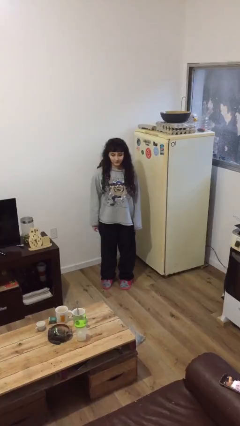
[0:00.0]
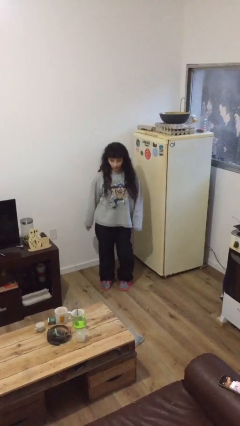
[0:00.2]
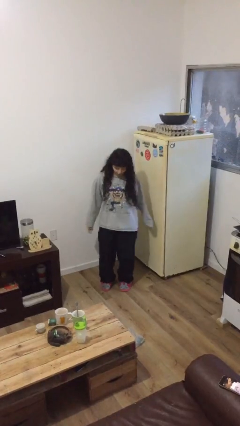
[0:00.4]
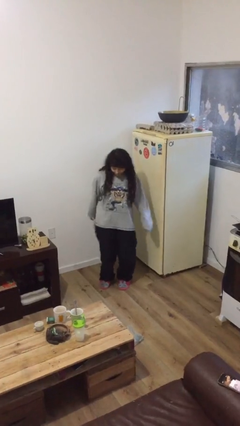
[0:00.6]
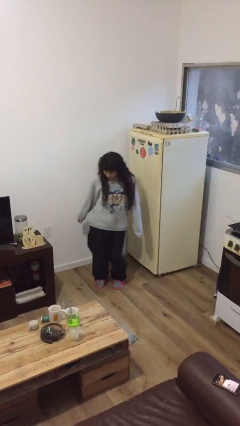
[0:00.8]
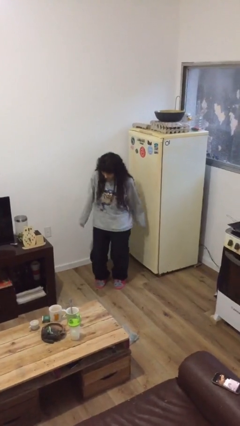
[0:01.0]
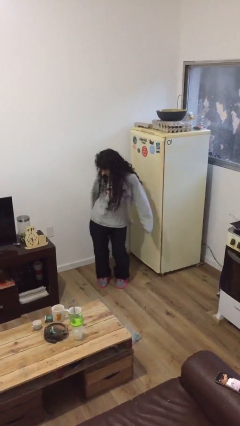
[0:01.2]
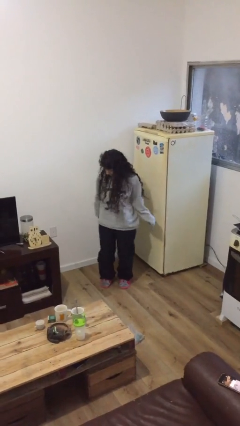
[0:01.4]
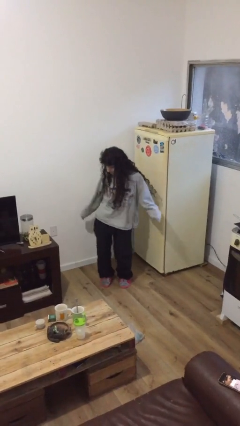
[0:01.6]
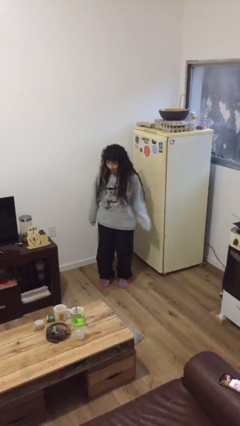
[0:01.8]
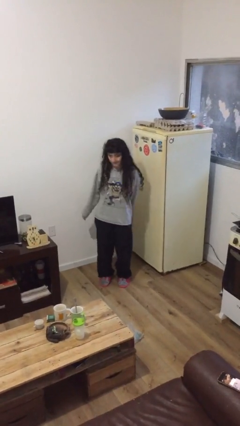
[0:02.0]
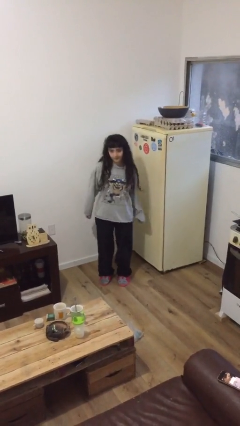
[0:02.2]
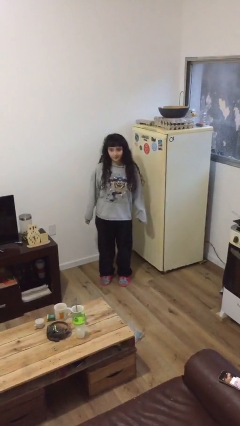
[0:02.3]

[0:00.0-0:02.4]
person wiggles hips

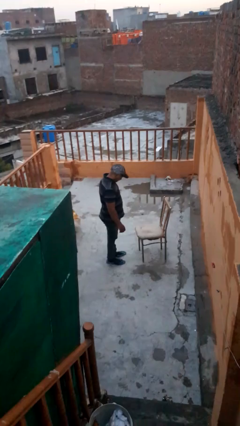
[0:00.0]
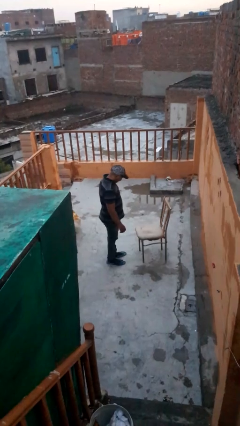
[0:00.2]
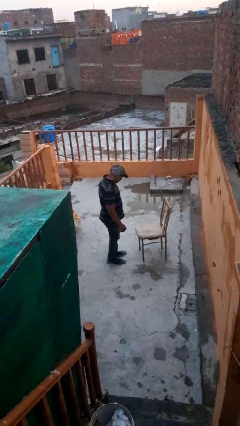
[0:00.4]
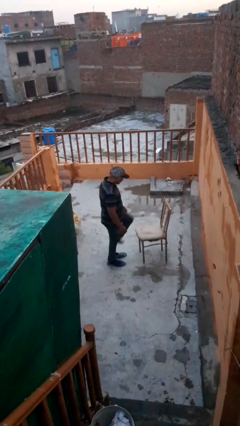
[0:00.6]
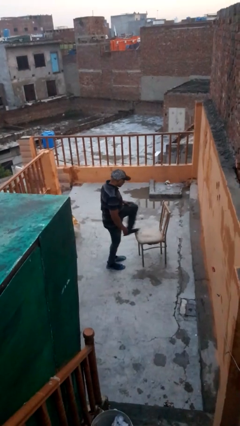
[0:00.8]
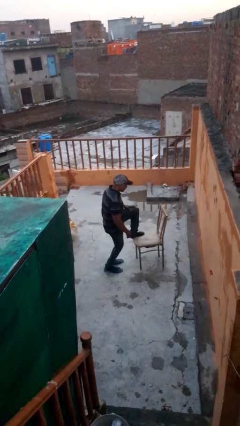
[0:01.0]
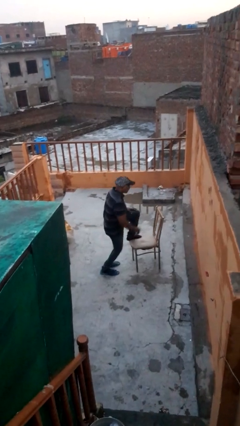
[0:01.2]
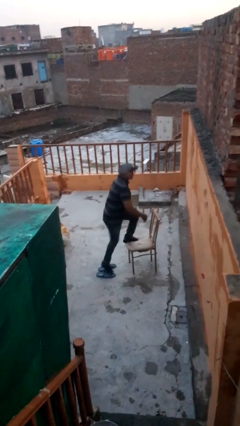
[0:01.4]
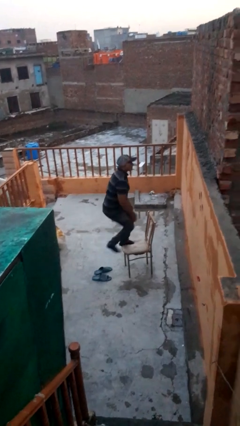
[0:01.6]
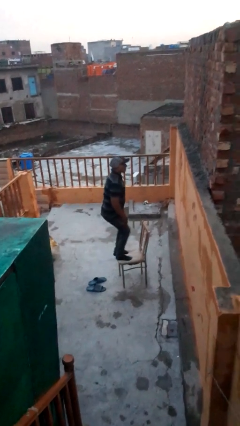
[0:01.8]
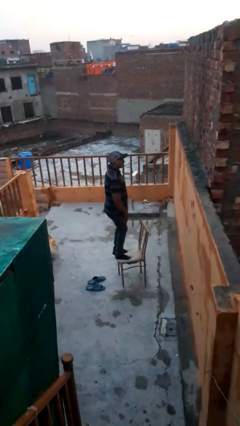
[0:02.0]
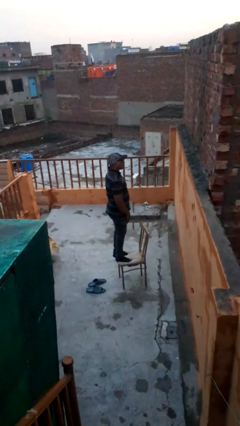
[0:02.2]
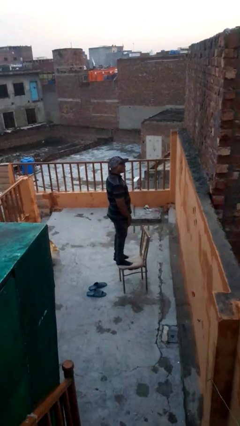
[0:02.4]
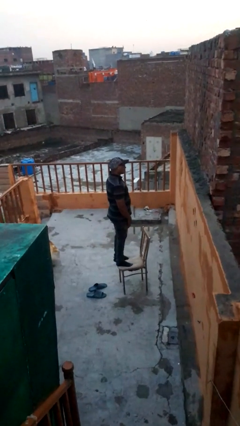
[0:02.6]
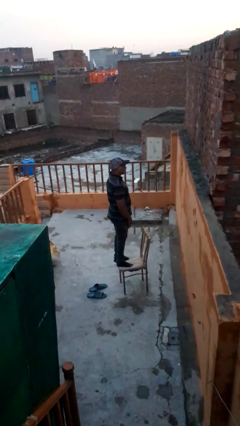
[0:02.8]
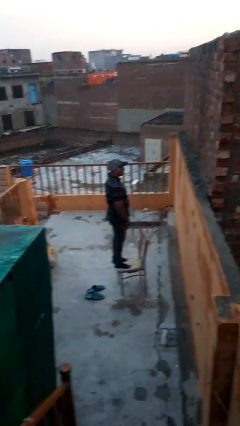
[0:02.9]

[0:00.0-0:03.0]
person climbs on chair

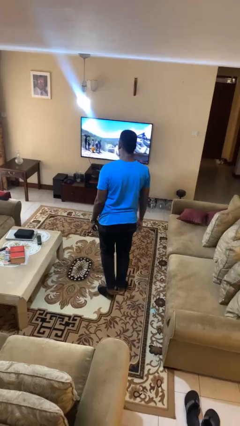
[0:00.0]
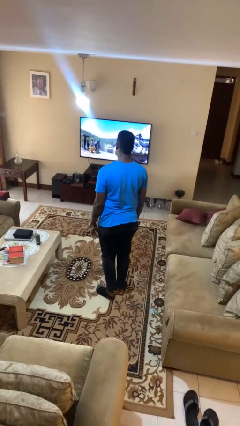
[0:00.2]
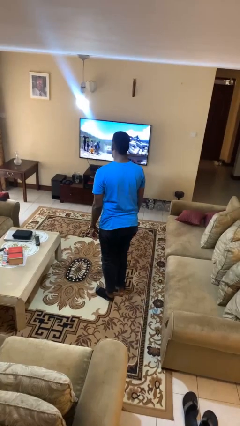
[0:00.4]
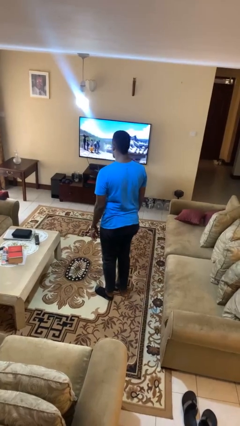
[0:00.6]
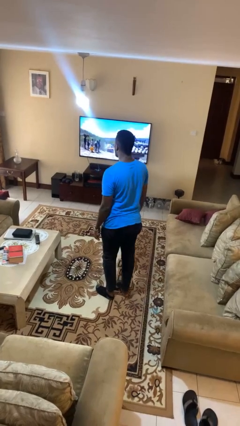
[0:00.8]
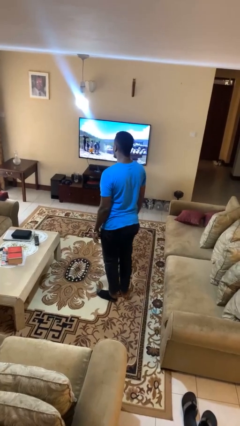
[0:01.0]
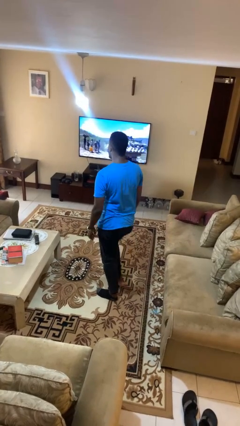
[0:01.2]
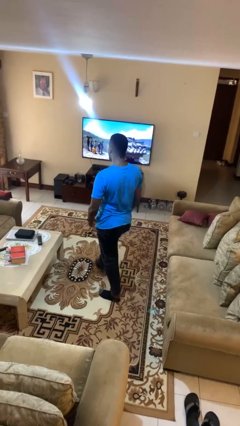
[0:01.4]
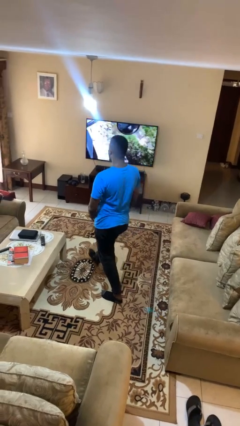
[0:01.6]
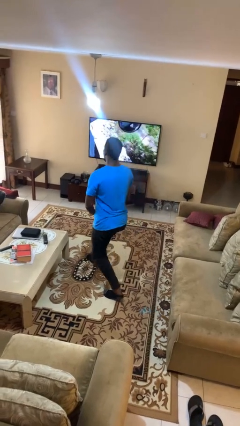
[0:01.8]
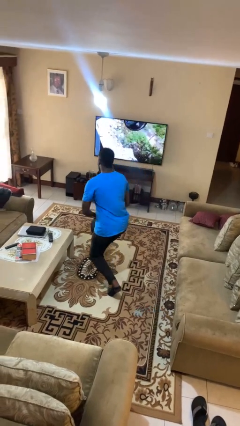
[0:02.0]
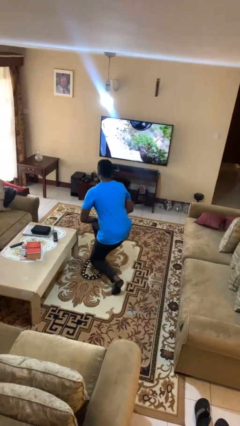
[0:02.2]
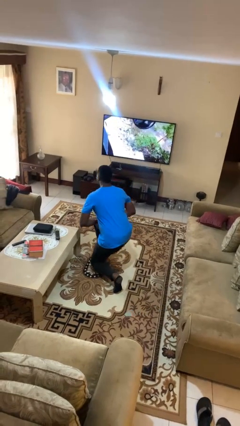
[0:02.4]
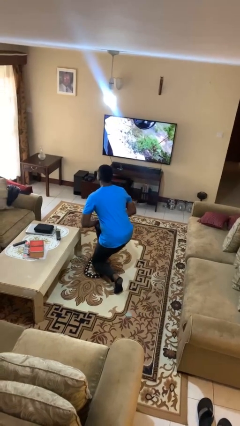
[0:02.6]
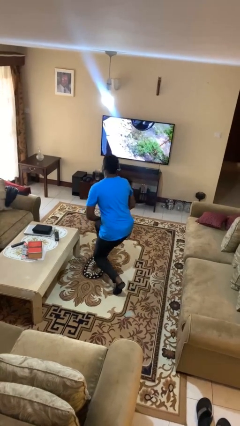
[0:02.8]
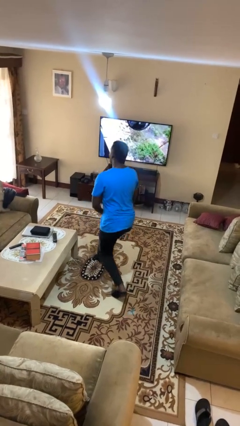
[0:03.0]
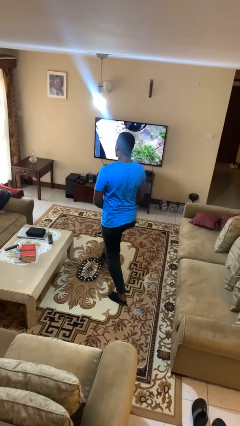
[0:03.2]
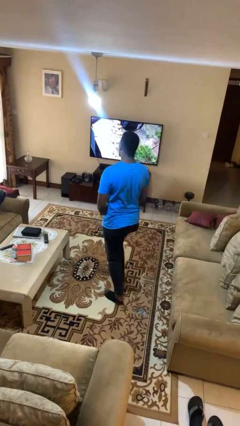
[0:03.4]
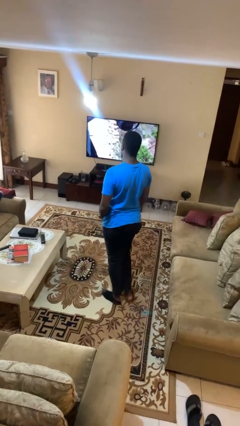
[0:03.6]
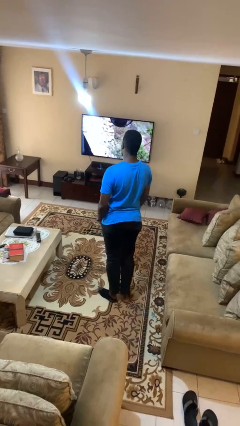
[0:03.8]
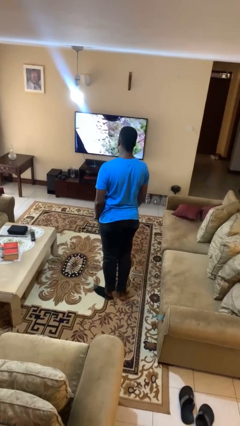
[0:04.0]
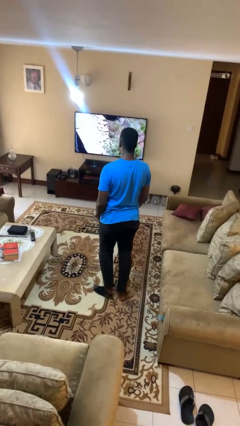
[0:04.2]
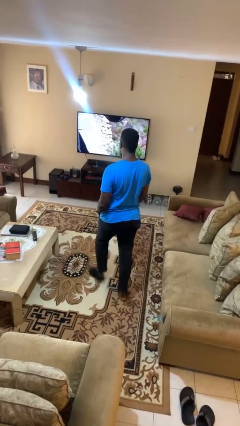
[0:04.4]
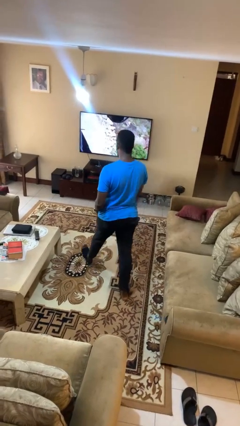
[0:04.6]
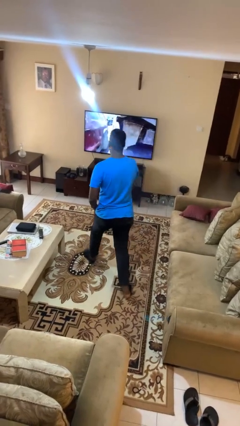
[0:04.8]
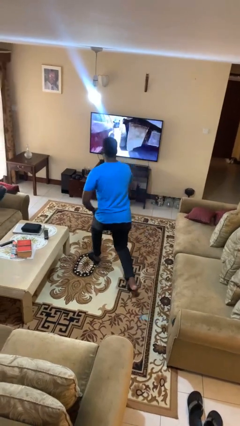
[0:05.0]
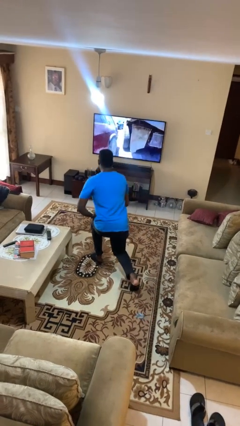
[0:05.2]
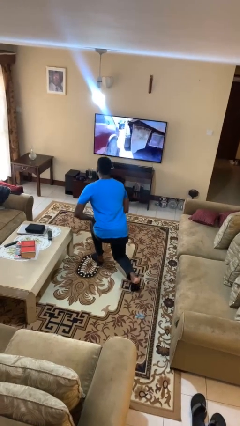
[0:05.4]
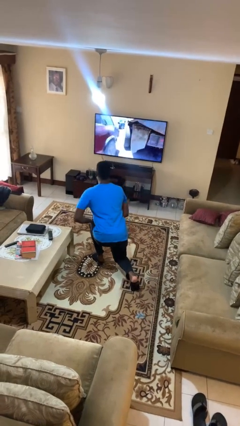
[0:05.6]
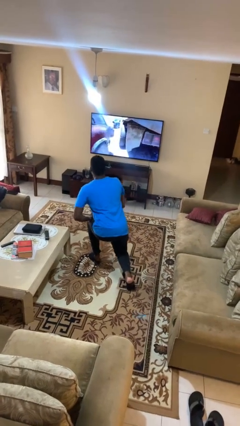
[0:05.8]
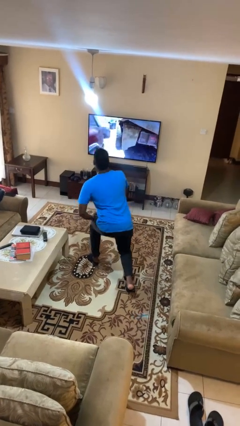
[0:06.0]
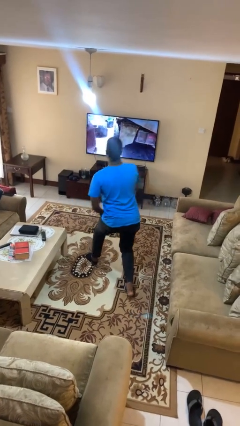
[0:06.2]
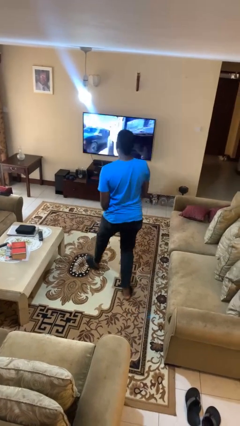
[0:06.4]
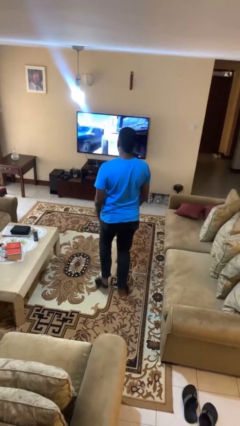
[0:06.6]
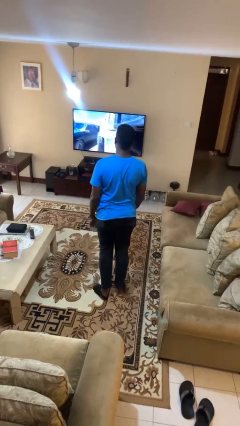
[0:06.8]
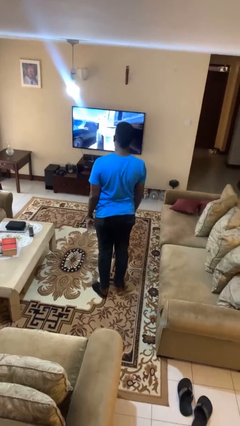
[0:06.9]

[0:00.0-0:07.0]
person exercises with lunges

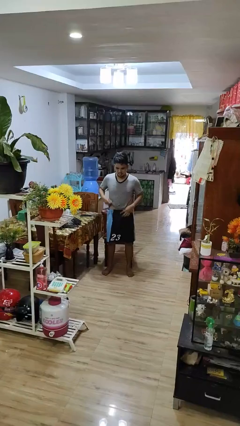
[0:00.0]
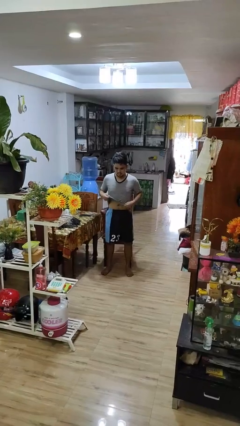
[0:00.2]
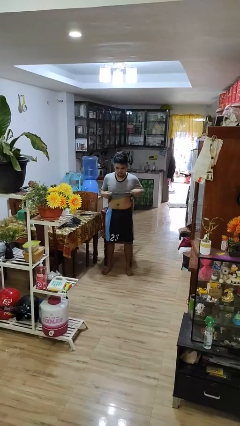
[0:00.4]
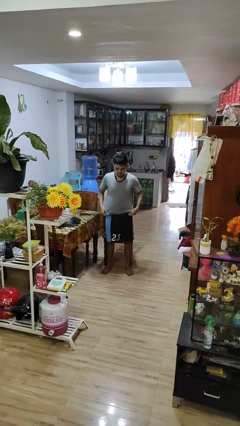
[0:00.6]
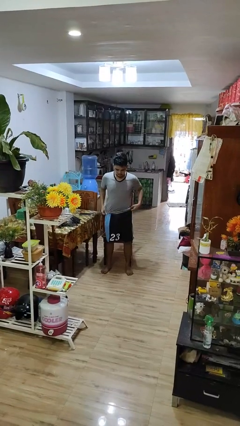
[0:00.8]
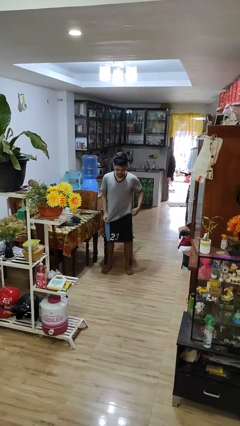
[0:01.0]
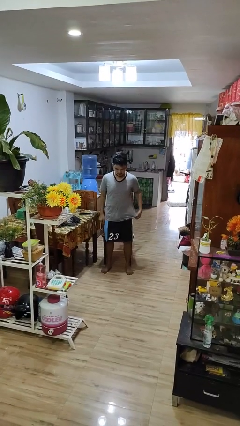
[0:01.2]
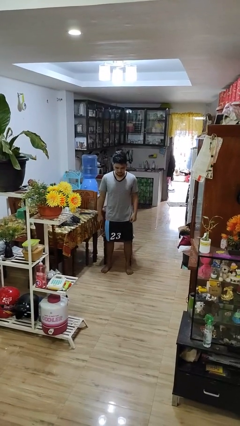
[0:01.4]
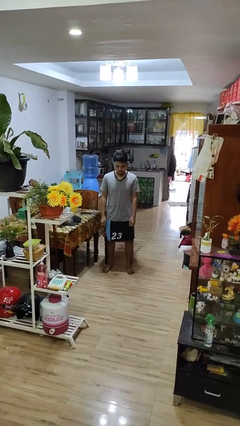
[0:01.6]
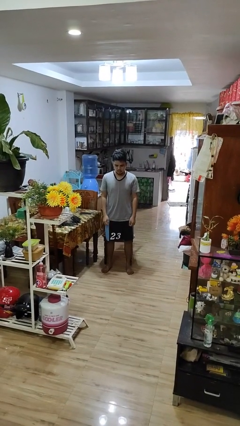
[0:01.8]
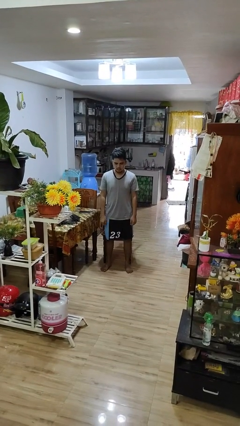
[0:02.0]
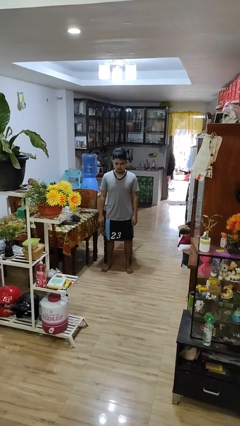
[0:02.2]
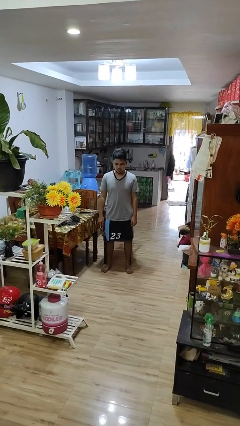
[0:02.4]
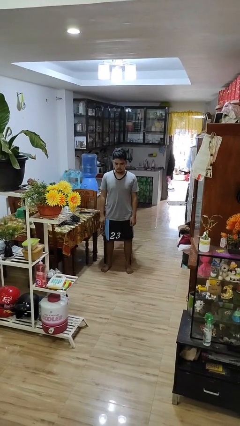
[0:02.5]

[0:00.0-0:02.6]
person untucks shirt

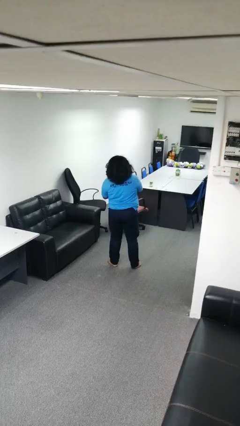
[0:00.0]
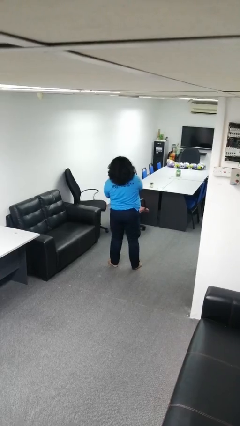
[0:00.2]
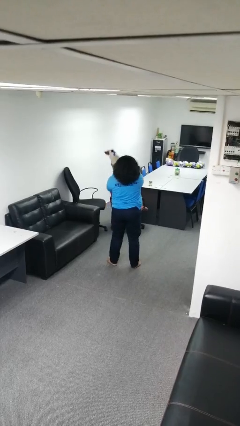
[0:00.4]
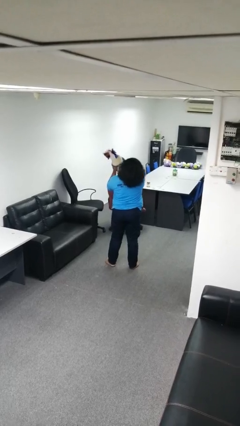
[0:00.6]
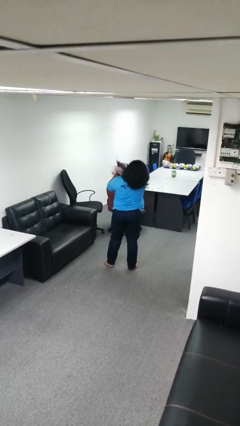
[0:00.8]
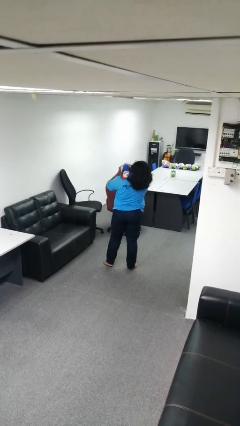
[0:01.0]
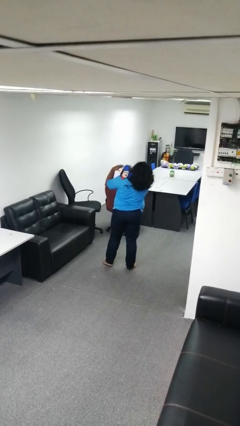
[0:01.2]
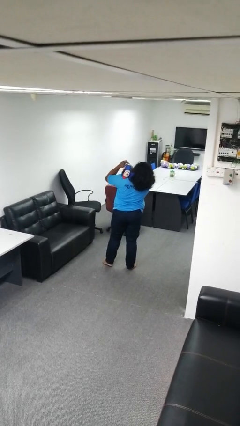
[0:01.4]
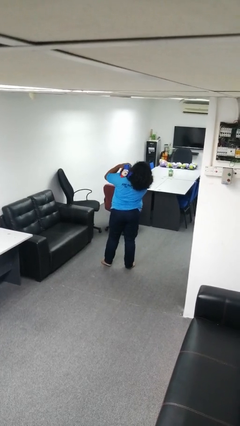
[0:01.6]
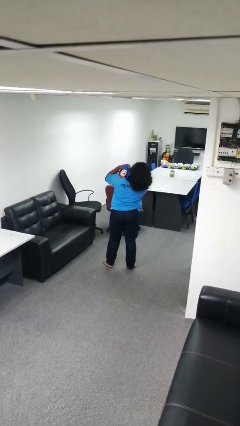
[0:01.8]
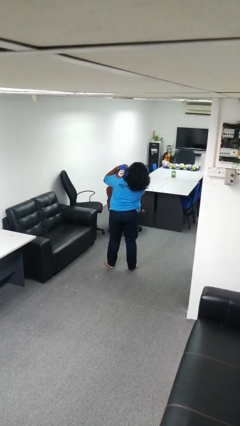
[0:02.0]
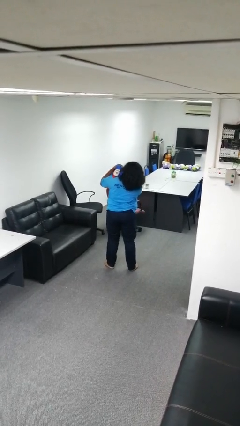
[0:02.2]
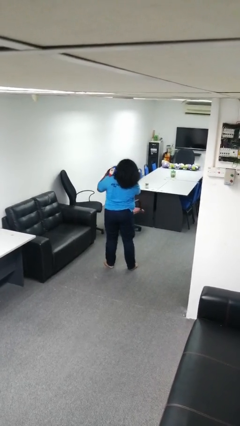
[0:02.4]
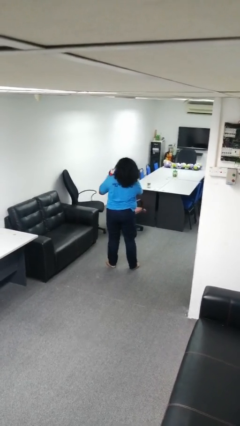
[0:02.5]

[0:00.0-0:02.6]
person hugs stuffed animal
